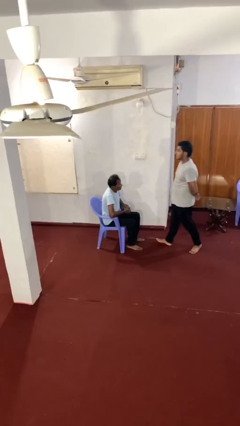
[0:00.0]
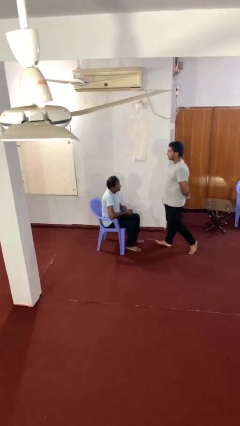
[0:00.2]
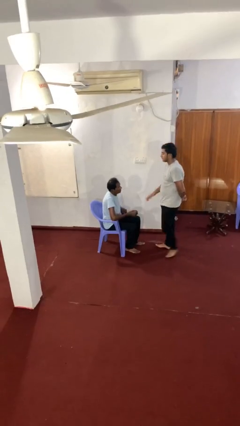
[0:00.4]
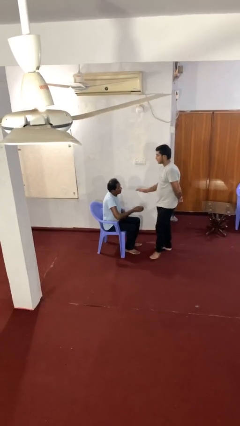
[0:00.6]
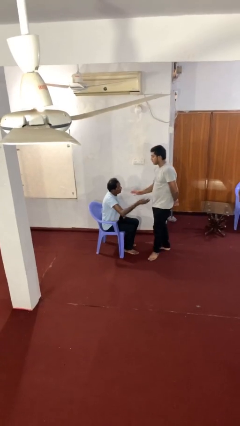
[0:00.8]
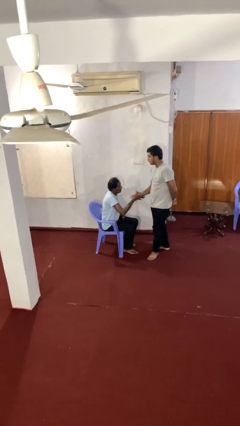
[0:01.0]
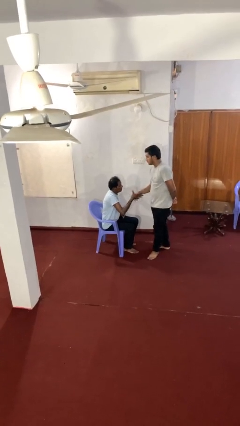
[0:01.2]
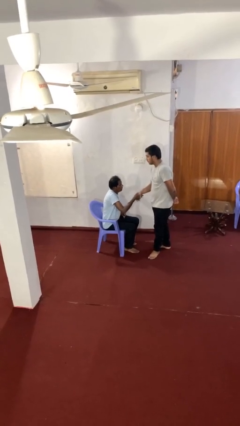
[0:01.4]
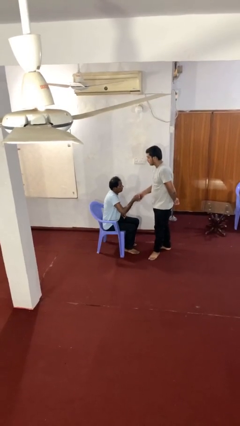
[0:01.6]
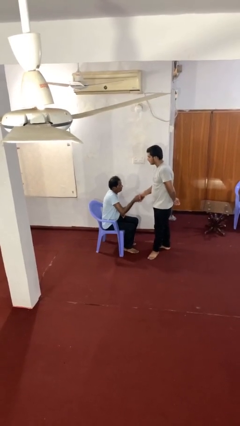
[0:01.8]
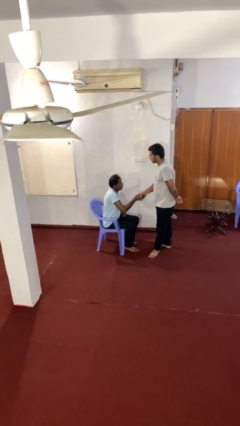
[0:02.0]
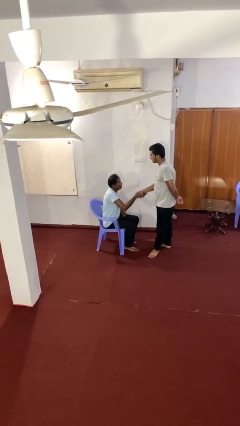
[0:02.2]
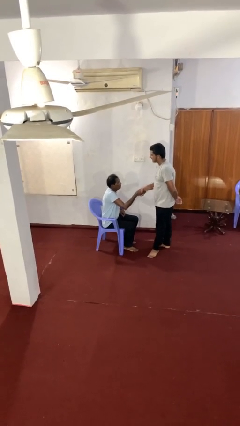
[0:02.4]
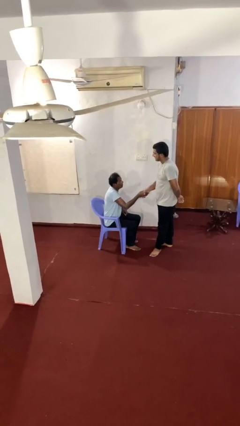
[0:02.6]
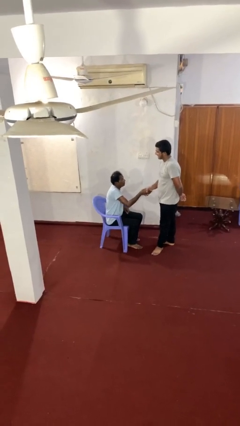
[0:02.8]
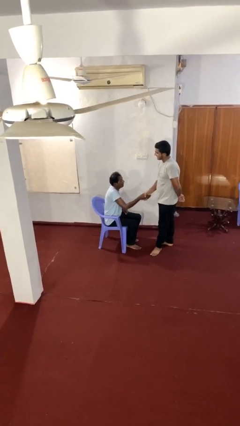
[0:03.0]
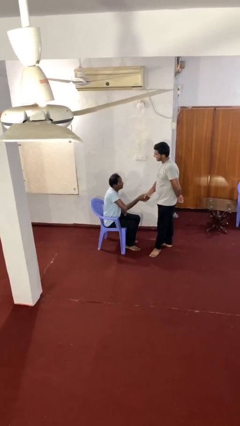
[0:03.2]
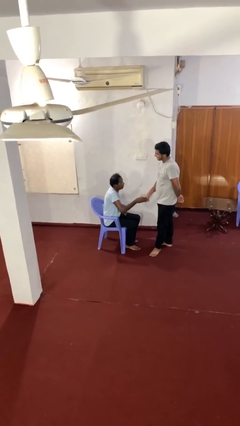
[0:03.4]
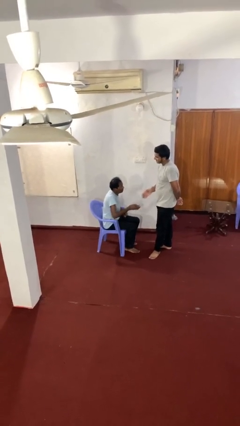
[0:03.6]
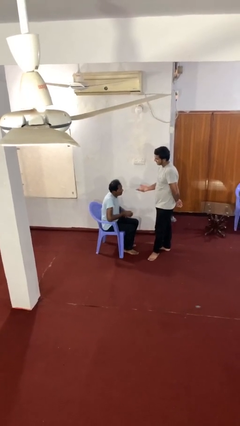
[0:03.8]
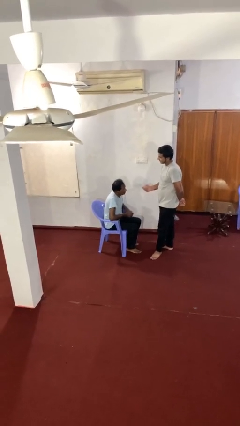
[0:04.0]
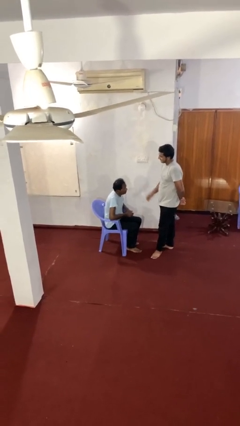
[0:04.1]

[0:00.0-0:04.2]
person shakes hand

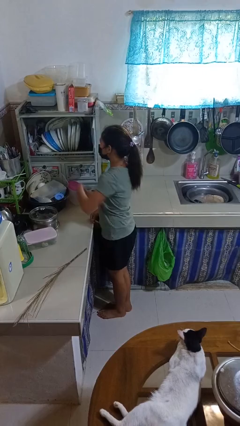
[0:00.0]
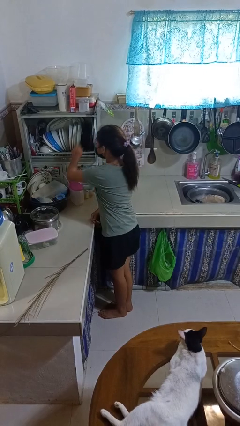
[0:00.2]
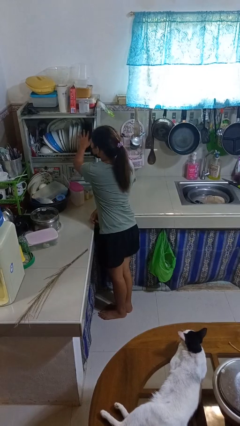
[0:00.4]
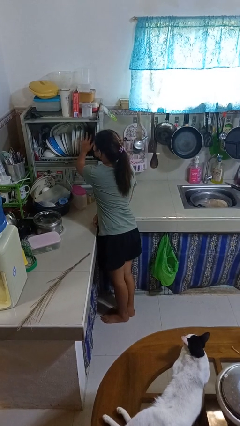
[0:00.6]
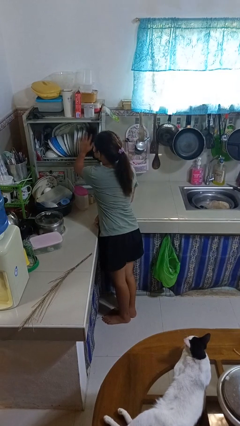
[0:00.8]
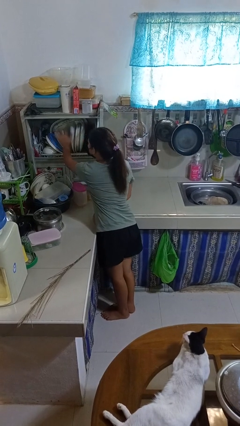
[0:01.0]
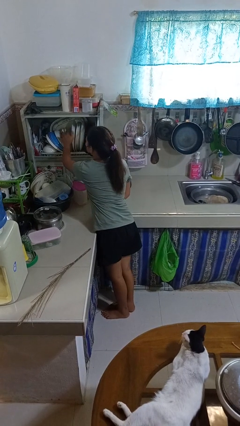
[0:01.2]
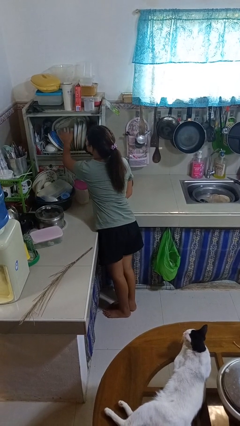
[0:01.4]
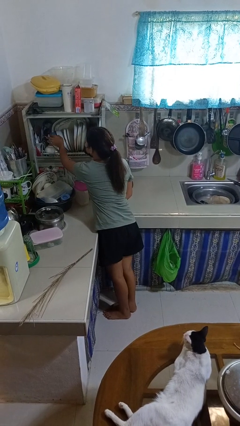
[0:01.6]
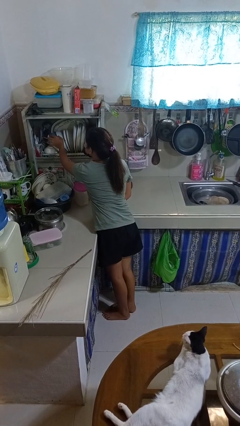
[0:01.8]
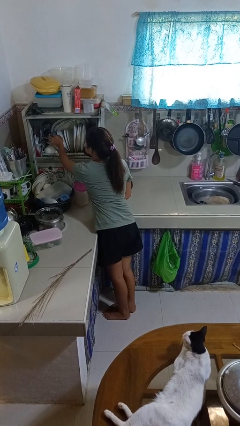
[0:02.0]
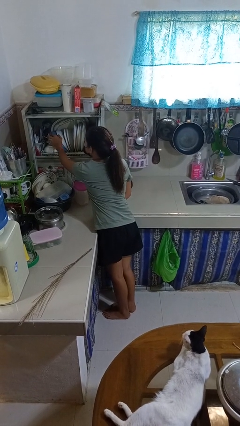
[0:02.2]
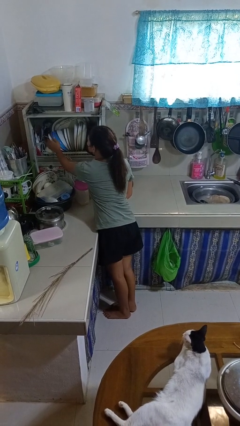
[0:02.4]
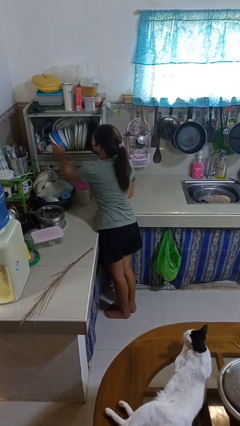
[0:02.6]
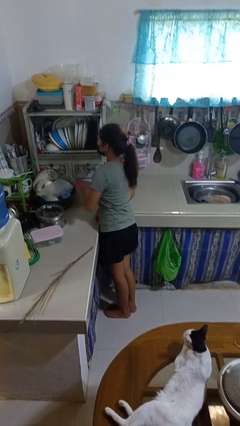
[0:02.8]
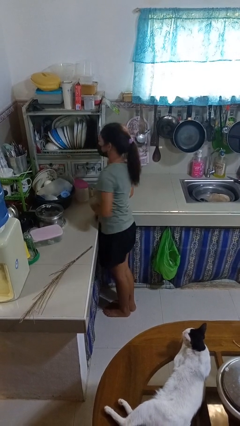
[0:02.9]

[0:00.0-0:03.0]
person searches in kitchen drawer

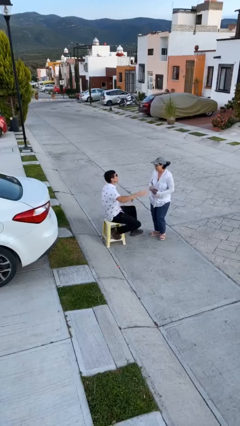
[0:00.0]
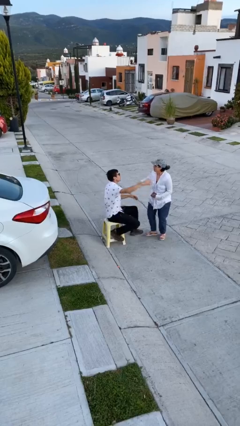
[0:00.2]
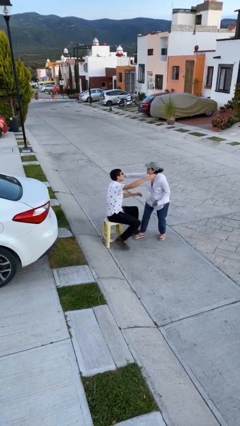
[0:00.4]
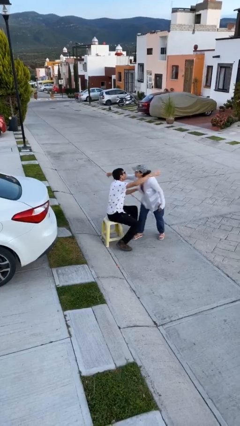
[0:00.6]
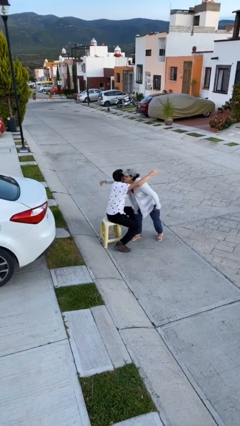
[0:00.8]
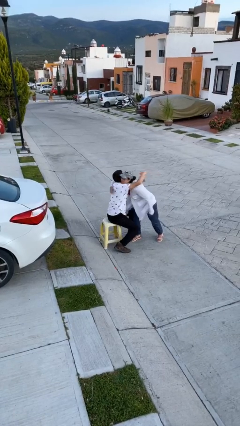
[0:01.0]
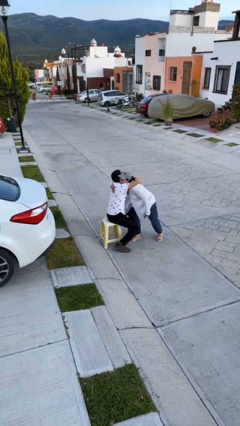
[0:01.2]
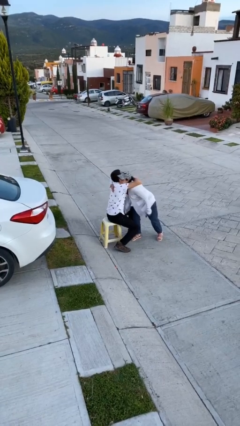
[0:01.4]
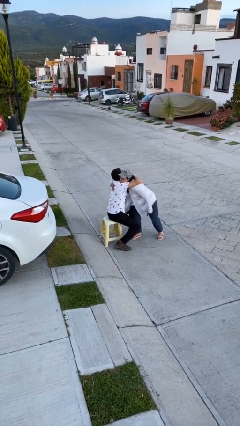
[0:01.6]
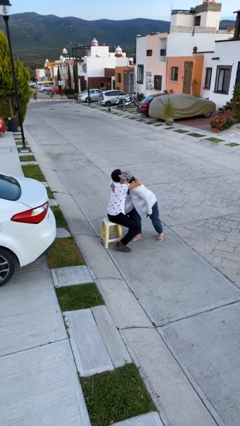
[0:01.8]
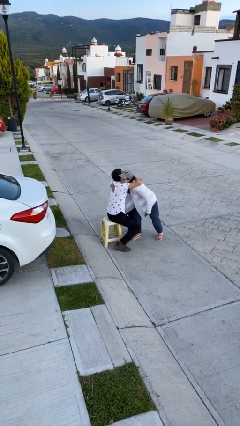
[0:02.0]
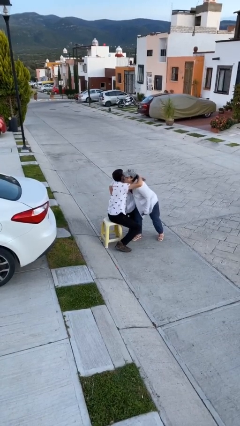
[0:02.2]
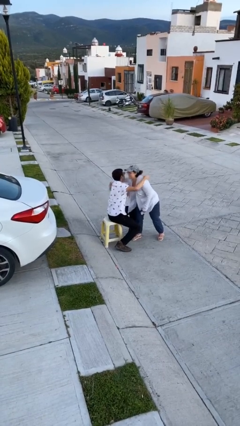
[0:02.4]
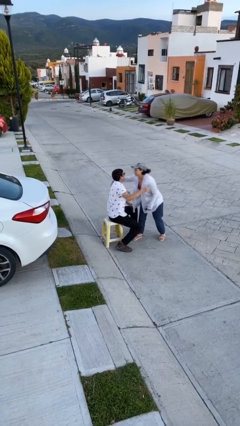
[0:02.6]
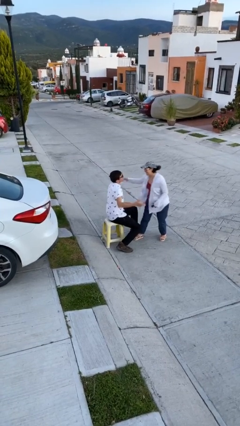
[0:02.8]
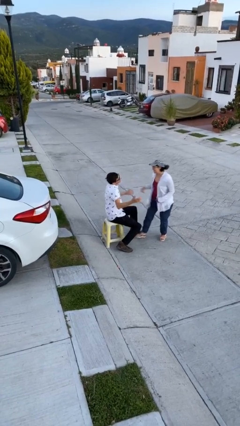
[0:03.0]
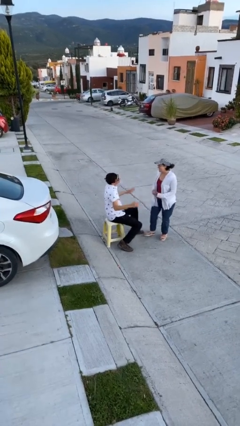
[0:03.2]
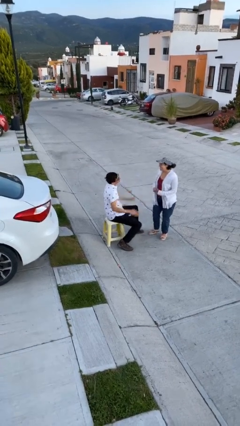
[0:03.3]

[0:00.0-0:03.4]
person embraces person

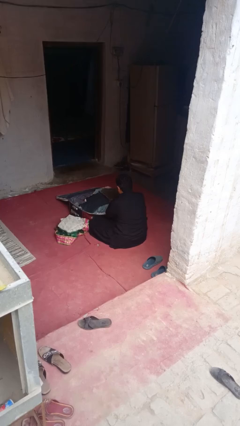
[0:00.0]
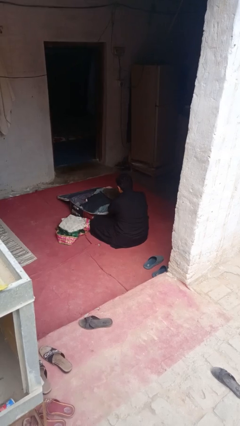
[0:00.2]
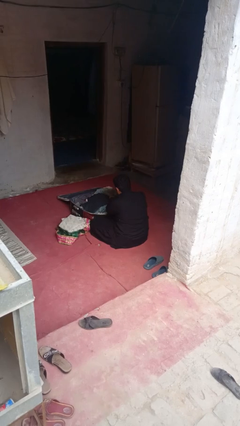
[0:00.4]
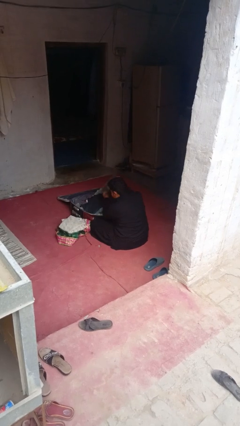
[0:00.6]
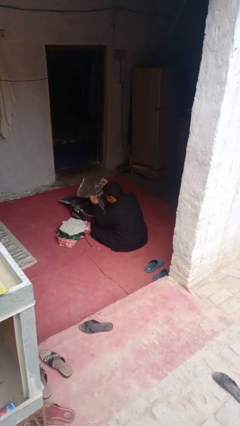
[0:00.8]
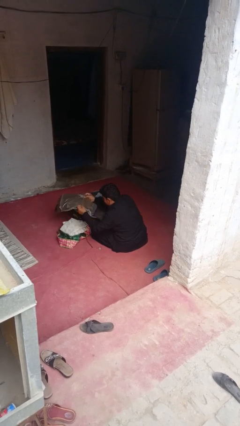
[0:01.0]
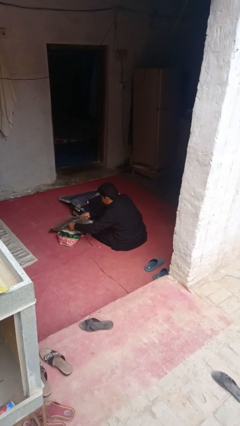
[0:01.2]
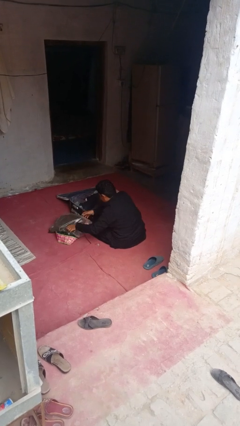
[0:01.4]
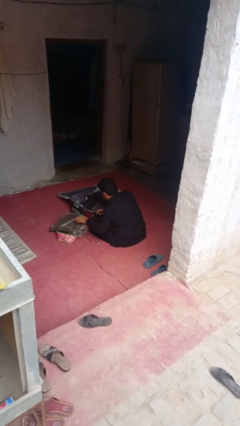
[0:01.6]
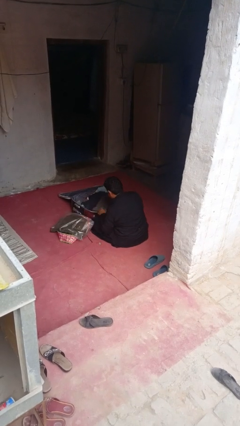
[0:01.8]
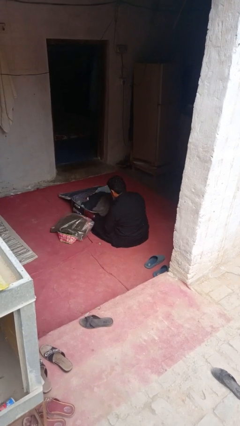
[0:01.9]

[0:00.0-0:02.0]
person unloads clothes from suitcase

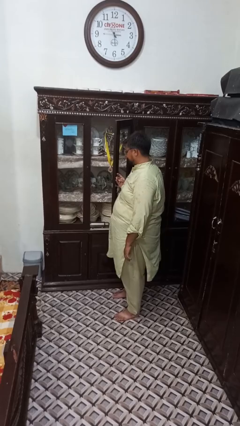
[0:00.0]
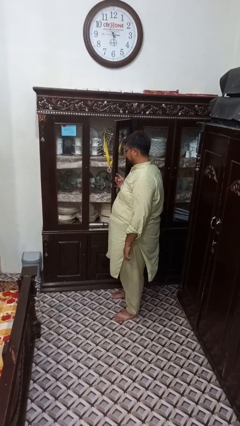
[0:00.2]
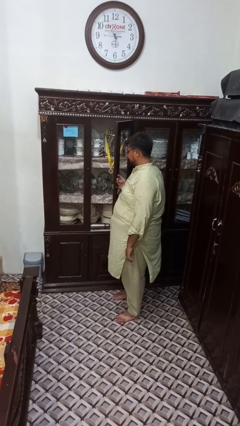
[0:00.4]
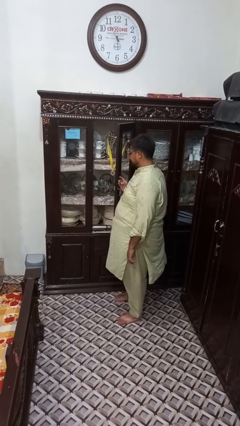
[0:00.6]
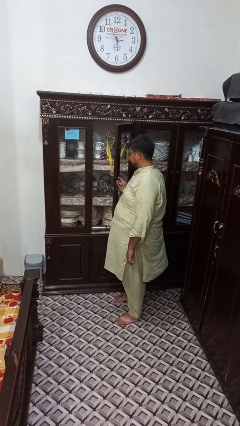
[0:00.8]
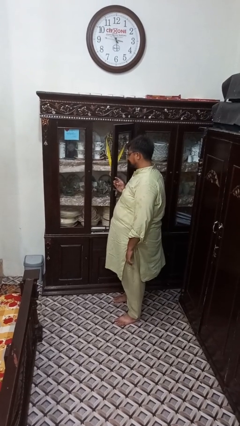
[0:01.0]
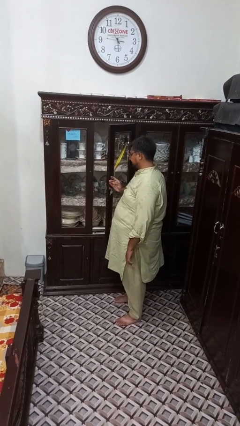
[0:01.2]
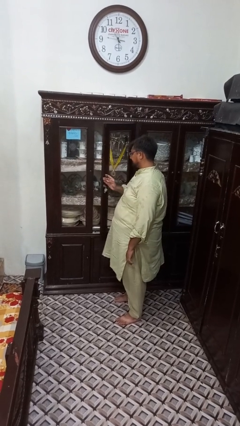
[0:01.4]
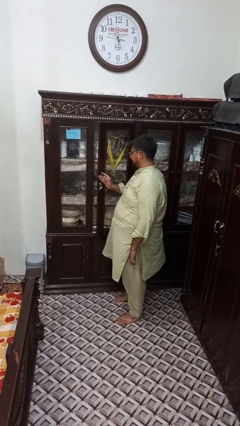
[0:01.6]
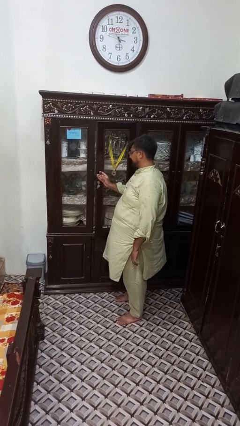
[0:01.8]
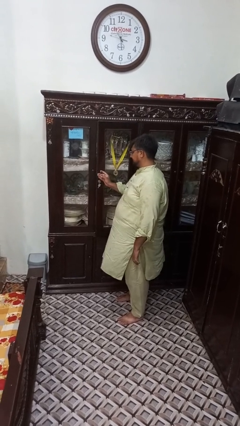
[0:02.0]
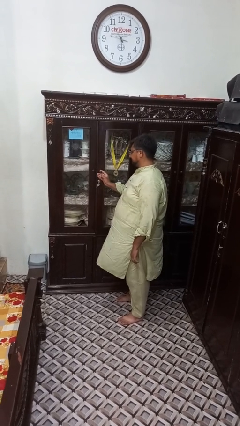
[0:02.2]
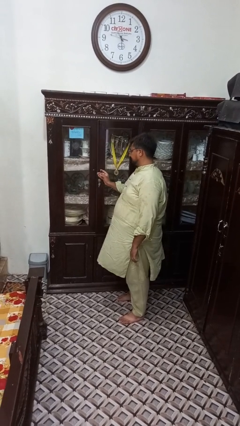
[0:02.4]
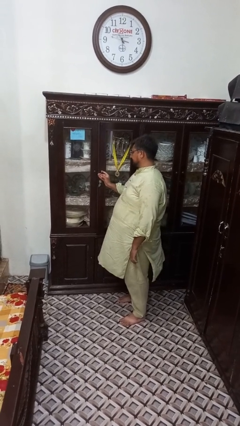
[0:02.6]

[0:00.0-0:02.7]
person closes cabinet

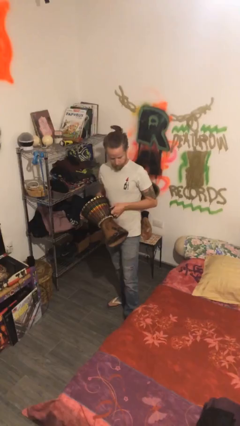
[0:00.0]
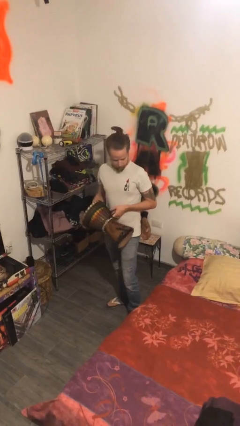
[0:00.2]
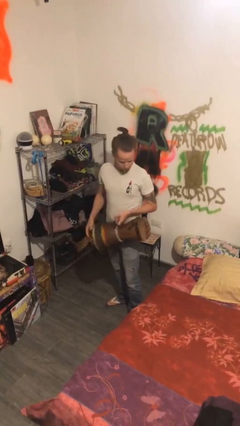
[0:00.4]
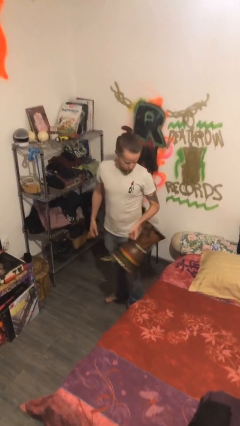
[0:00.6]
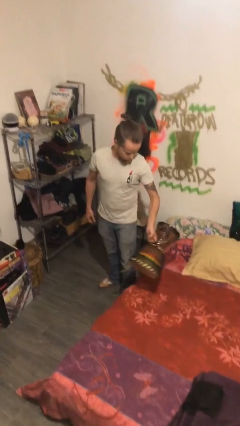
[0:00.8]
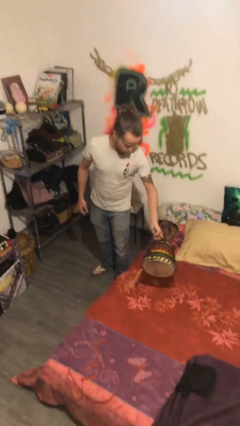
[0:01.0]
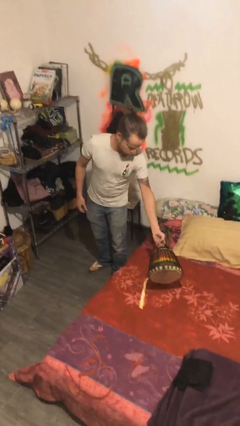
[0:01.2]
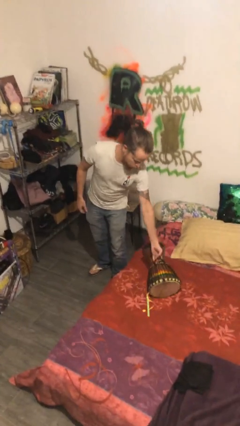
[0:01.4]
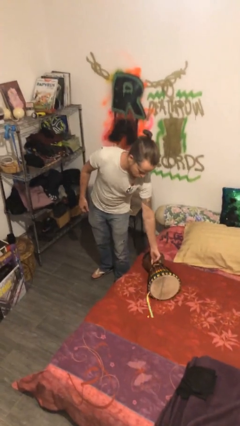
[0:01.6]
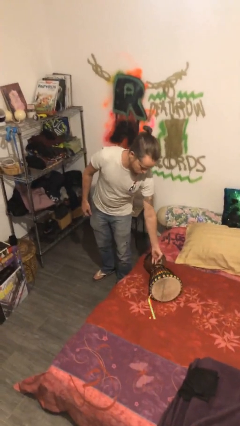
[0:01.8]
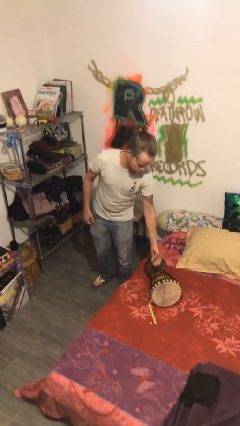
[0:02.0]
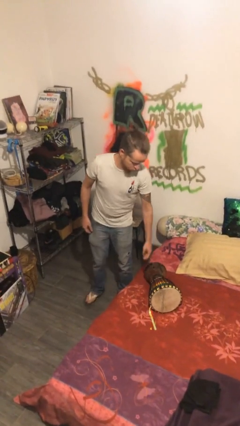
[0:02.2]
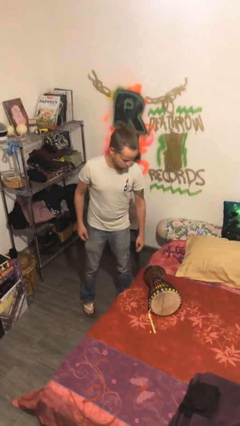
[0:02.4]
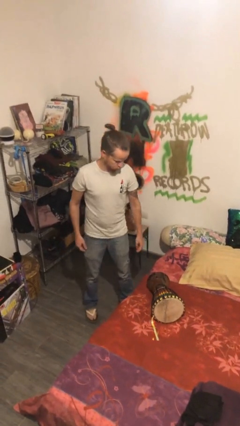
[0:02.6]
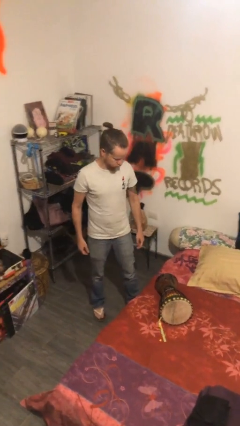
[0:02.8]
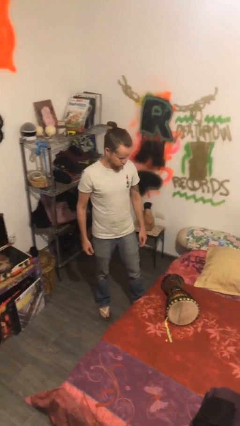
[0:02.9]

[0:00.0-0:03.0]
person puts down object on bed
